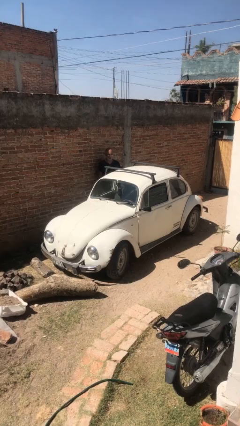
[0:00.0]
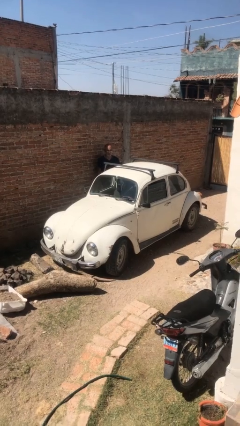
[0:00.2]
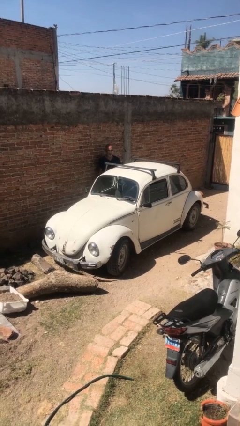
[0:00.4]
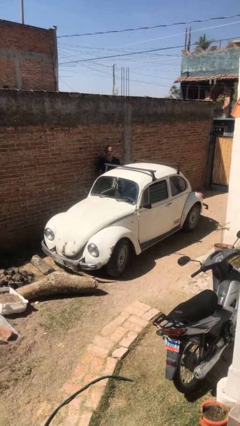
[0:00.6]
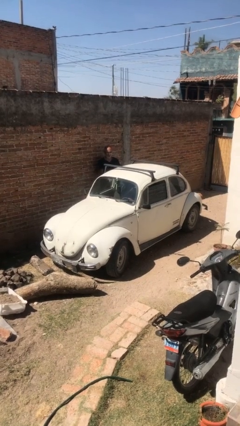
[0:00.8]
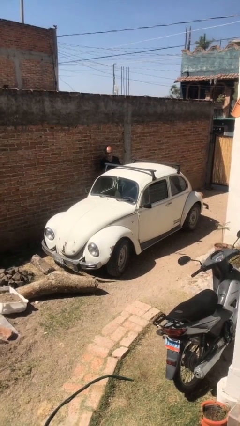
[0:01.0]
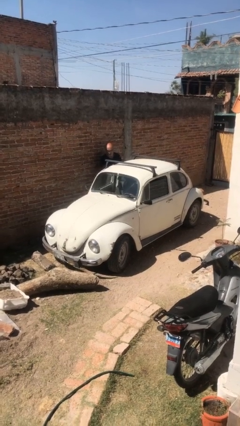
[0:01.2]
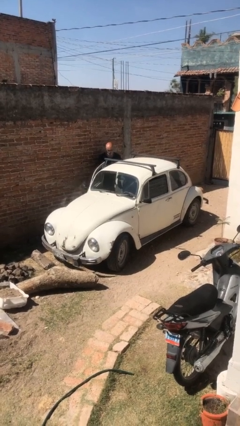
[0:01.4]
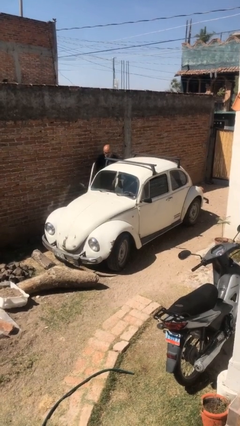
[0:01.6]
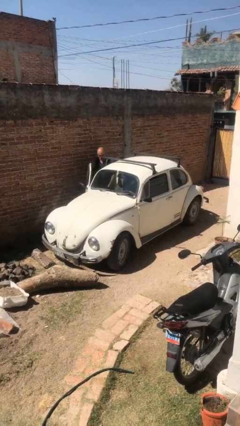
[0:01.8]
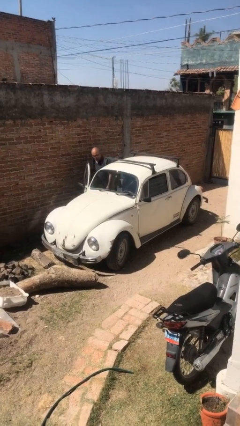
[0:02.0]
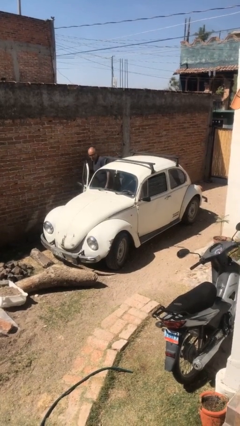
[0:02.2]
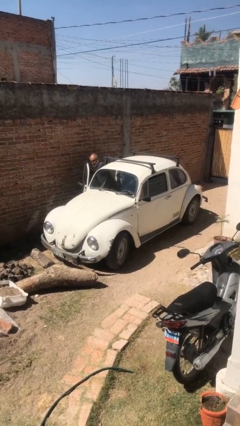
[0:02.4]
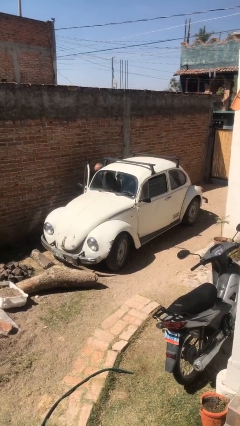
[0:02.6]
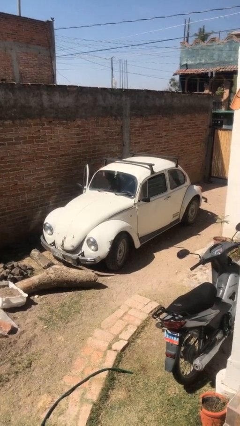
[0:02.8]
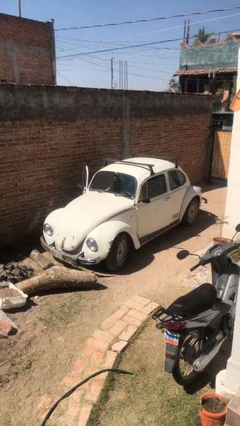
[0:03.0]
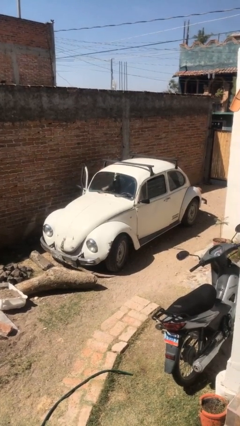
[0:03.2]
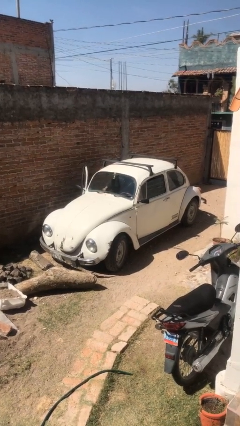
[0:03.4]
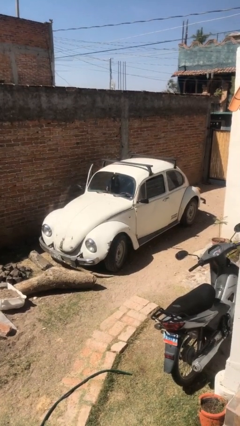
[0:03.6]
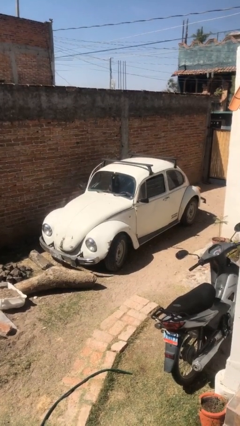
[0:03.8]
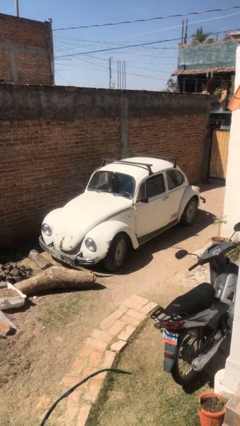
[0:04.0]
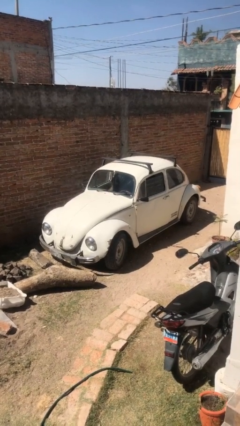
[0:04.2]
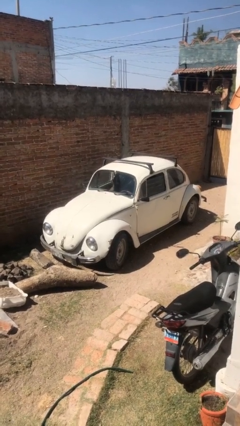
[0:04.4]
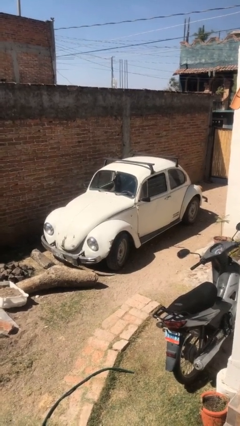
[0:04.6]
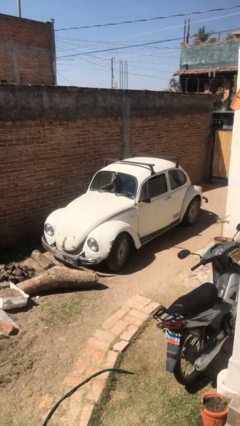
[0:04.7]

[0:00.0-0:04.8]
car picks up person

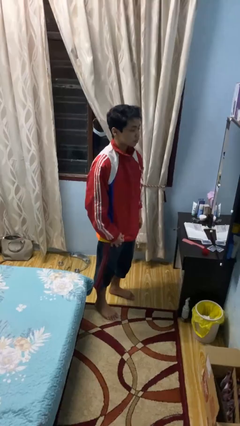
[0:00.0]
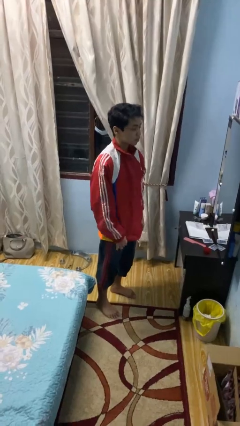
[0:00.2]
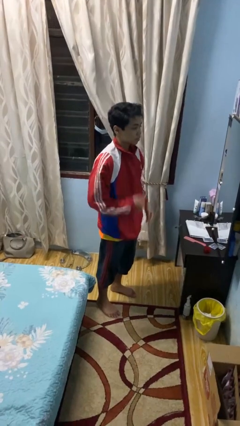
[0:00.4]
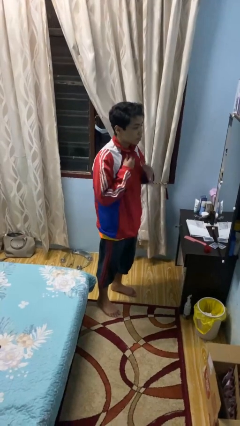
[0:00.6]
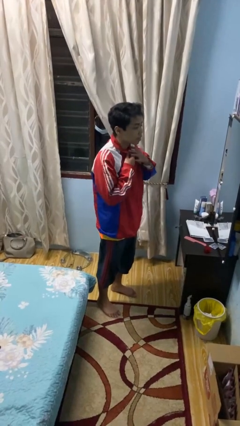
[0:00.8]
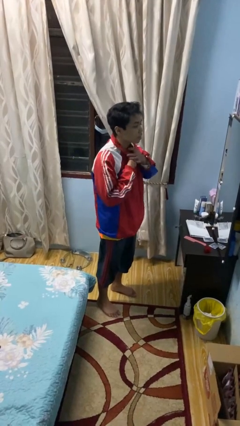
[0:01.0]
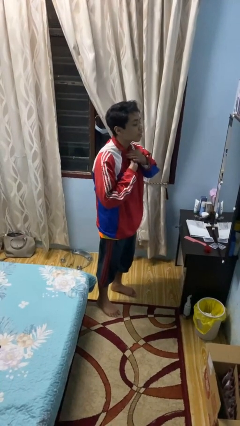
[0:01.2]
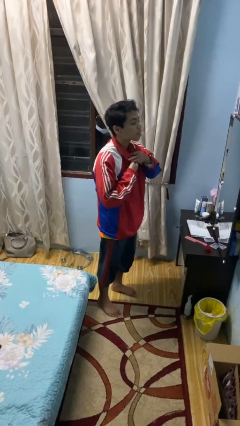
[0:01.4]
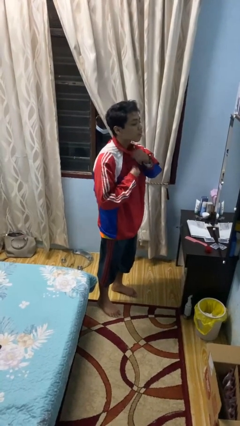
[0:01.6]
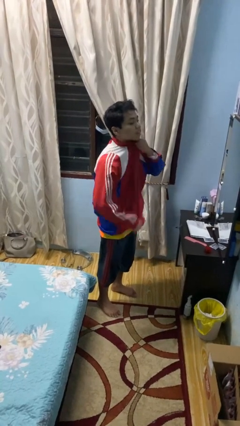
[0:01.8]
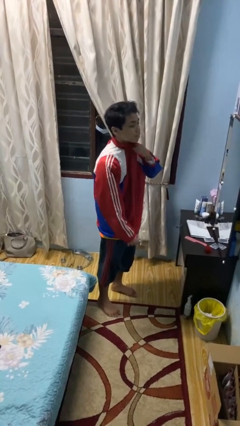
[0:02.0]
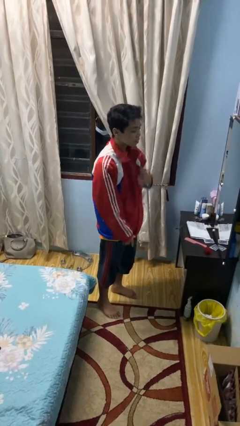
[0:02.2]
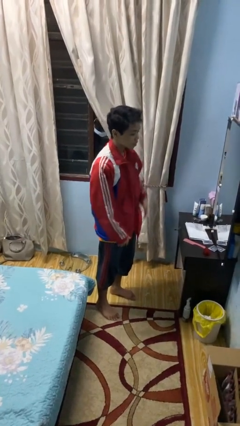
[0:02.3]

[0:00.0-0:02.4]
person unzips jacket

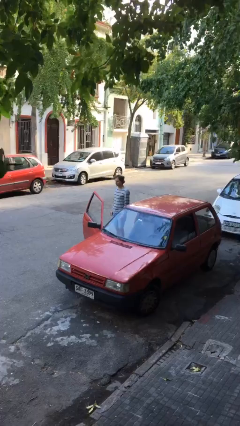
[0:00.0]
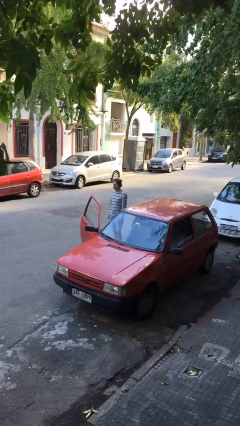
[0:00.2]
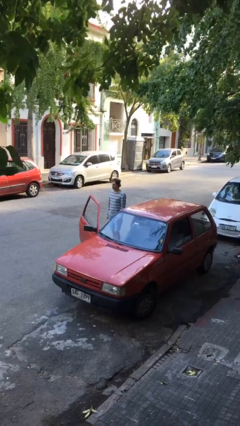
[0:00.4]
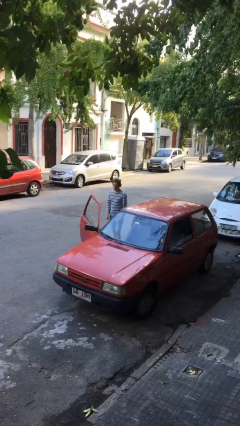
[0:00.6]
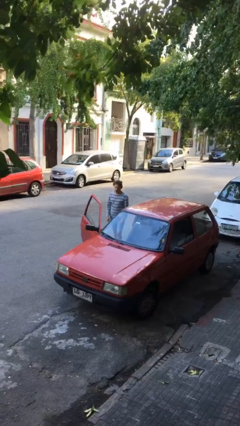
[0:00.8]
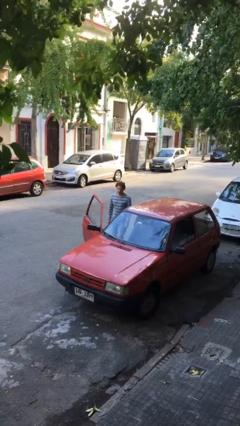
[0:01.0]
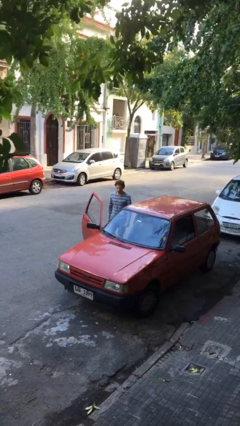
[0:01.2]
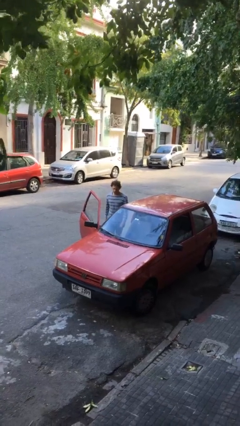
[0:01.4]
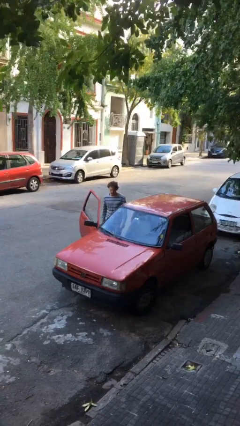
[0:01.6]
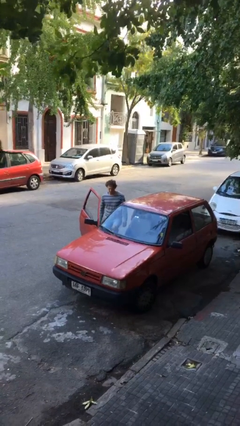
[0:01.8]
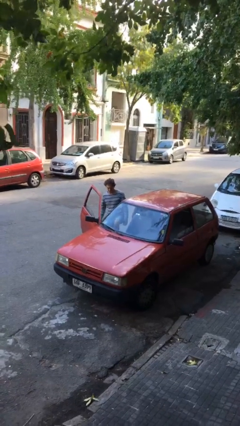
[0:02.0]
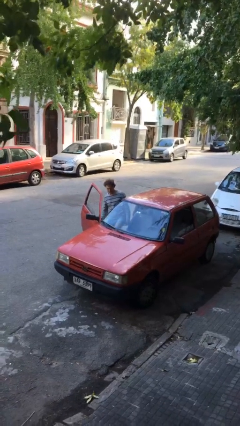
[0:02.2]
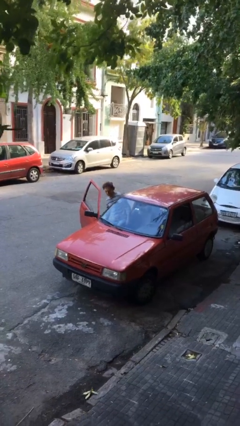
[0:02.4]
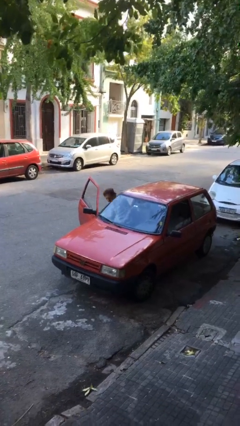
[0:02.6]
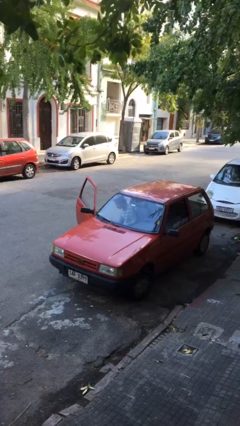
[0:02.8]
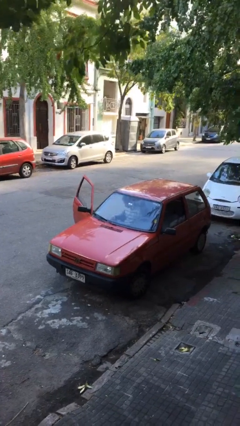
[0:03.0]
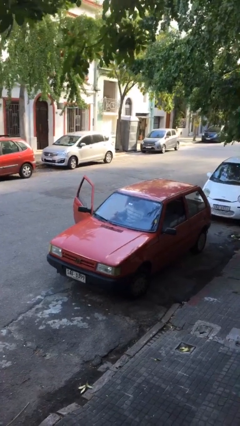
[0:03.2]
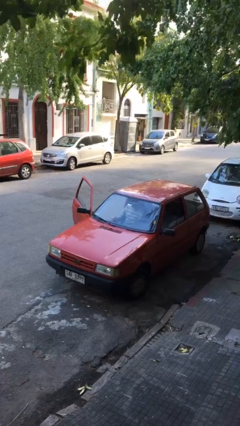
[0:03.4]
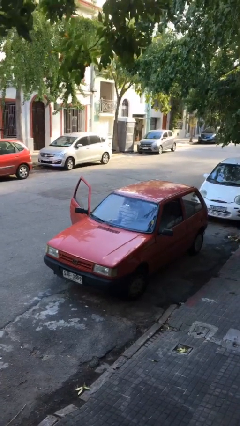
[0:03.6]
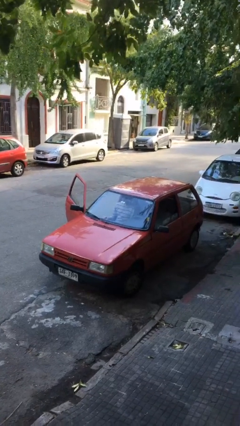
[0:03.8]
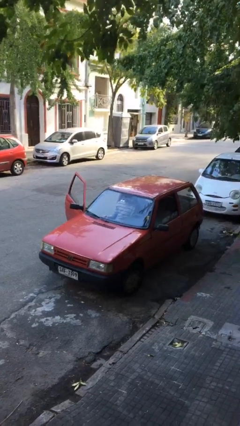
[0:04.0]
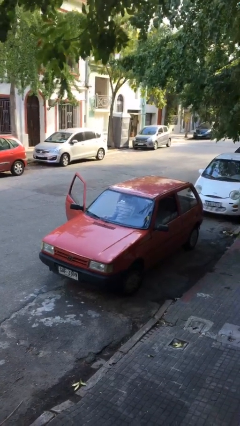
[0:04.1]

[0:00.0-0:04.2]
person enters car

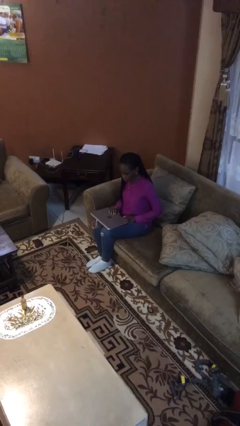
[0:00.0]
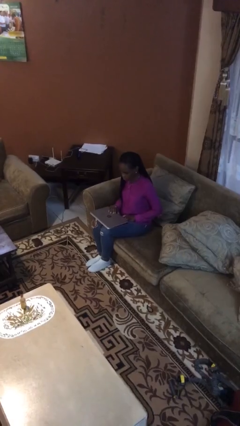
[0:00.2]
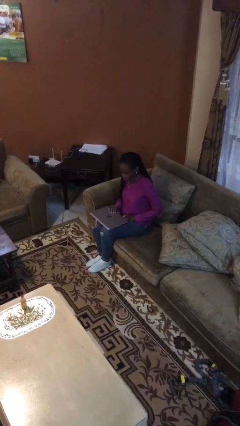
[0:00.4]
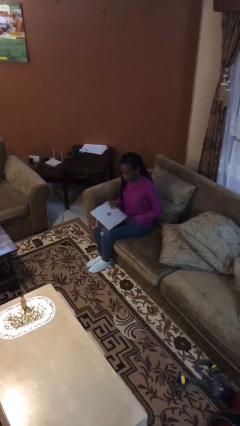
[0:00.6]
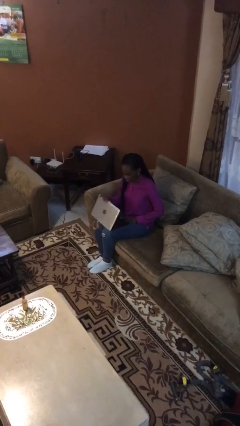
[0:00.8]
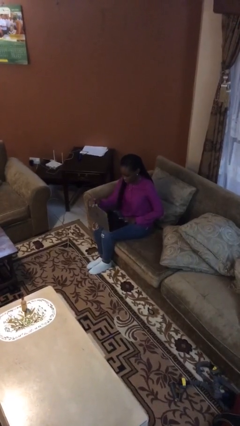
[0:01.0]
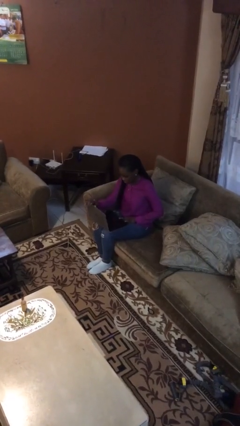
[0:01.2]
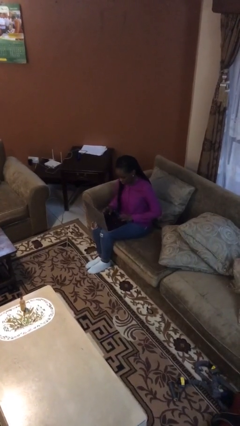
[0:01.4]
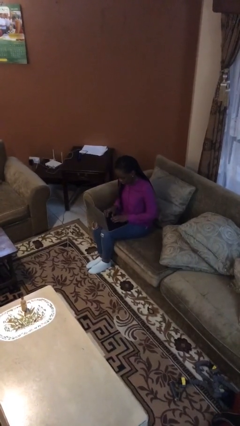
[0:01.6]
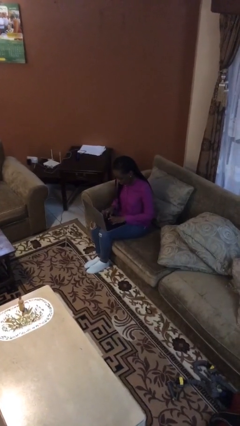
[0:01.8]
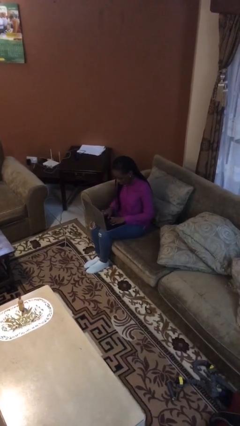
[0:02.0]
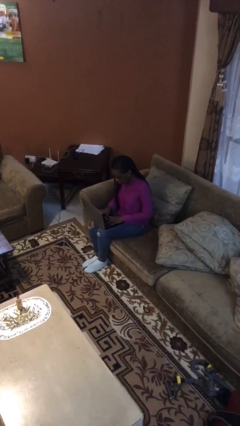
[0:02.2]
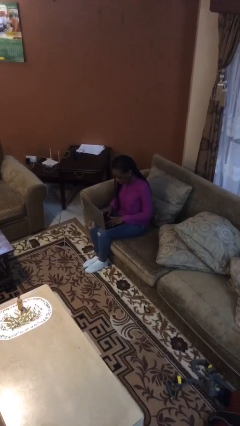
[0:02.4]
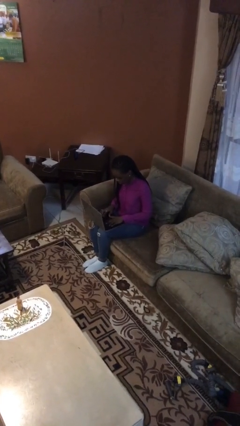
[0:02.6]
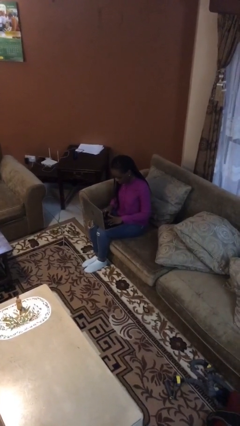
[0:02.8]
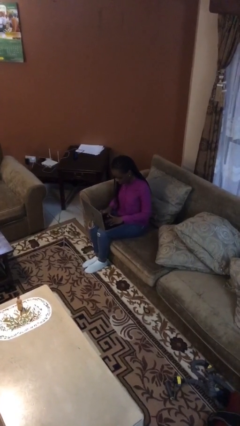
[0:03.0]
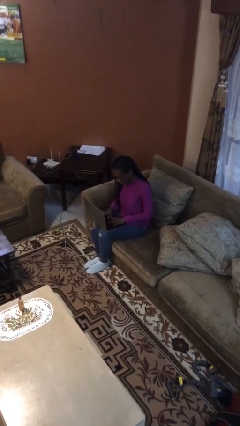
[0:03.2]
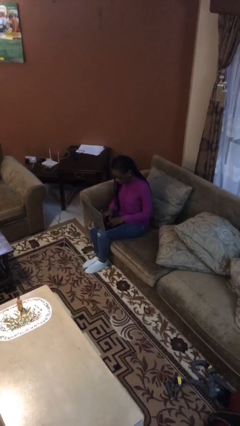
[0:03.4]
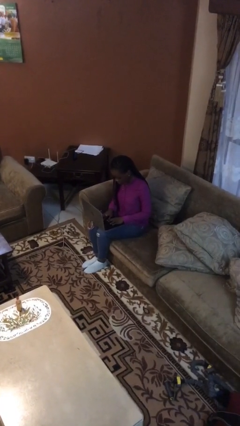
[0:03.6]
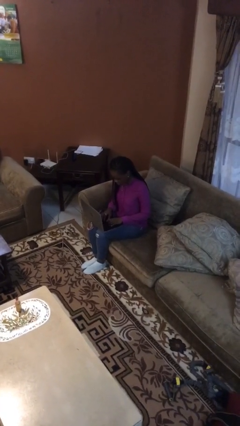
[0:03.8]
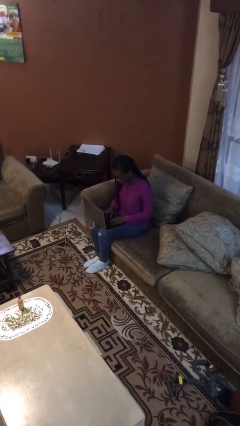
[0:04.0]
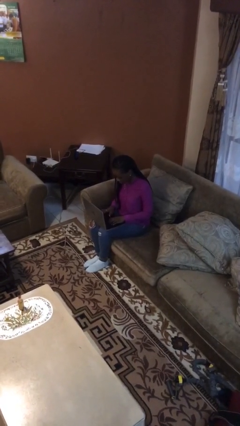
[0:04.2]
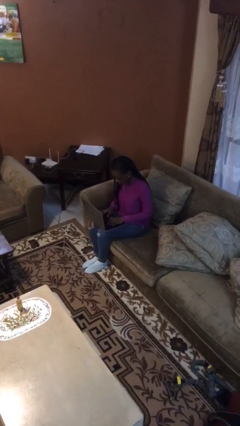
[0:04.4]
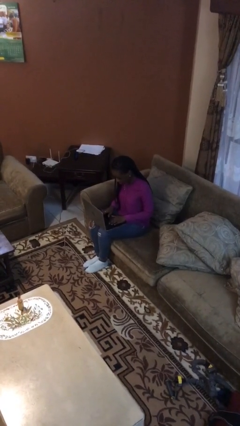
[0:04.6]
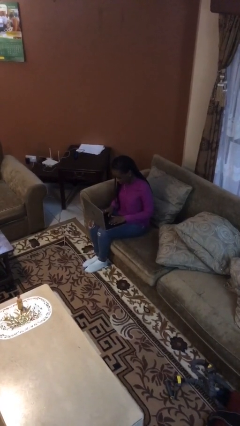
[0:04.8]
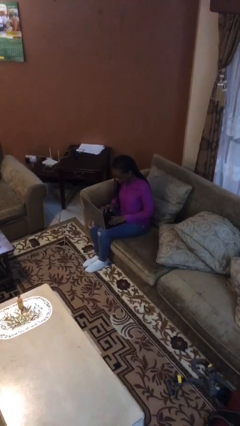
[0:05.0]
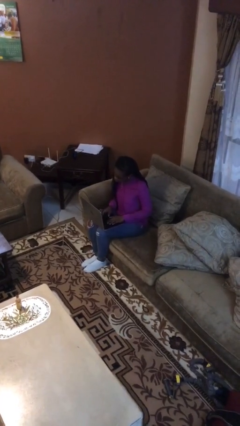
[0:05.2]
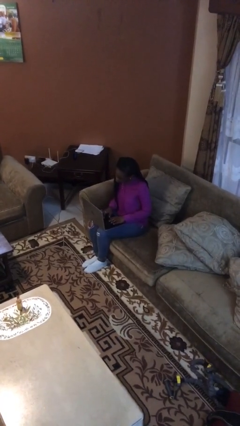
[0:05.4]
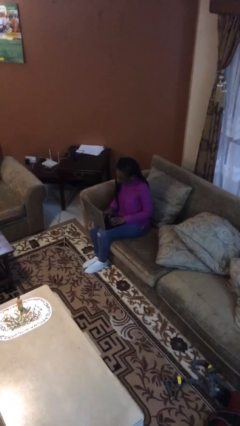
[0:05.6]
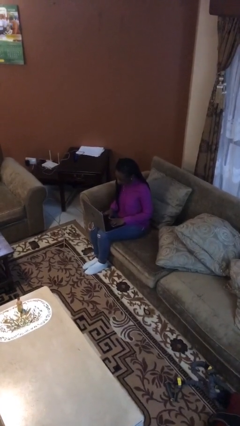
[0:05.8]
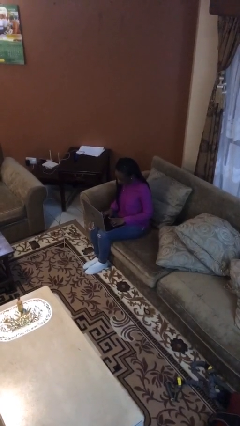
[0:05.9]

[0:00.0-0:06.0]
person interacts with laptop

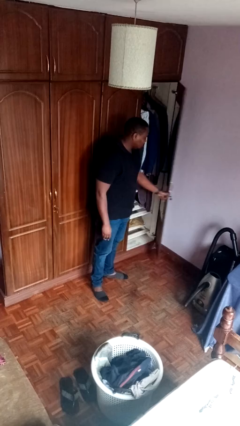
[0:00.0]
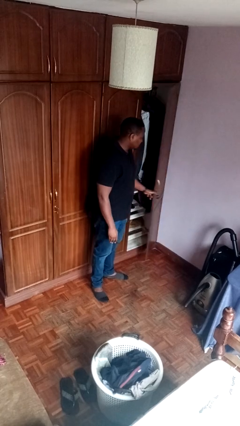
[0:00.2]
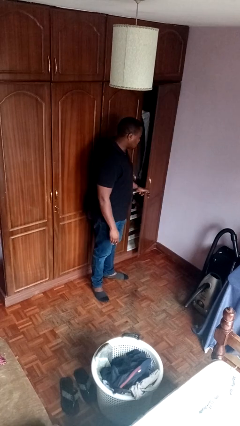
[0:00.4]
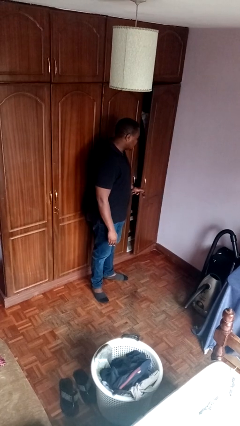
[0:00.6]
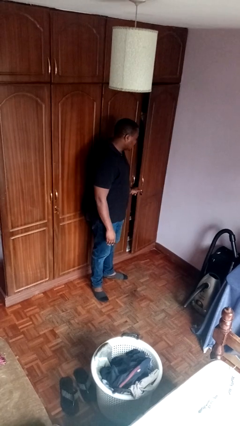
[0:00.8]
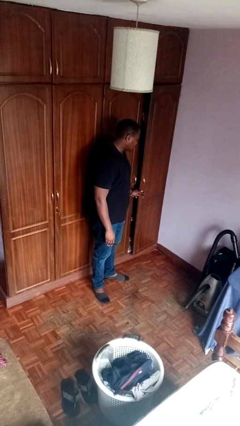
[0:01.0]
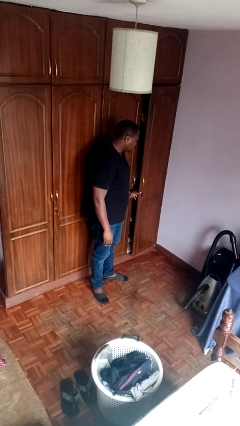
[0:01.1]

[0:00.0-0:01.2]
person closes closet door
